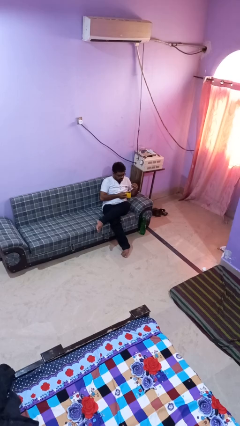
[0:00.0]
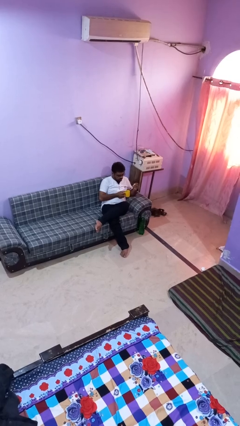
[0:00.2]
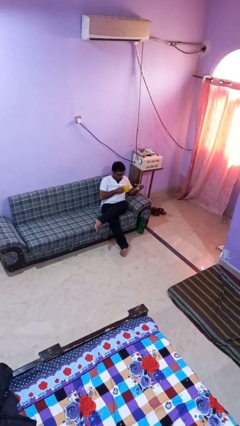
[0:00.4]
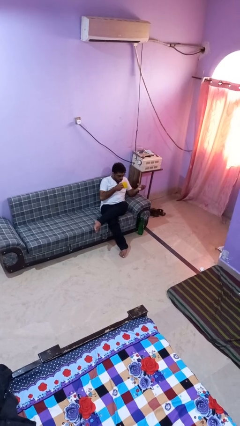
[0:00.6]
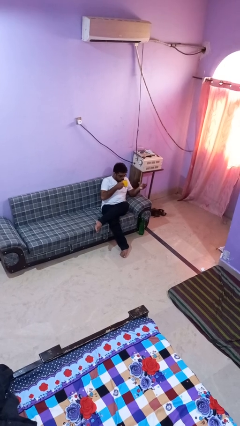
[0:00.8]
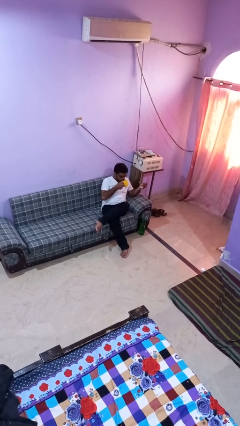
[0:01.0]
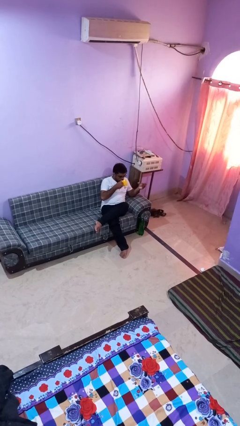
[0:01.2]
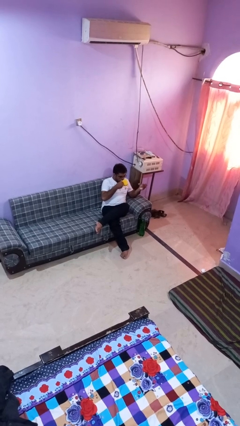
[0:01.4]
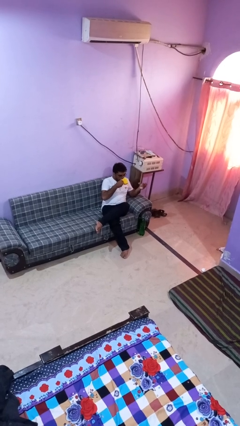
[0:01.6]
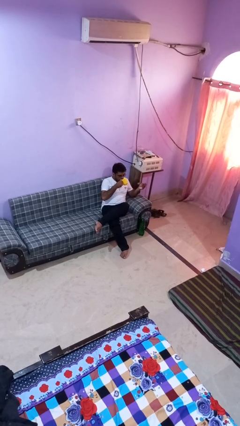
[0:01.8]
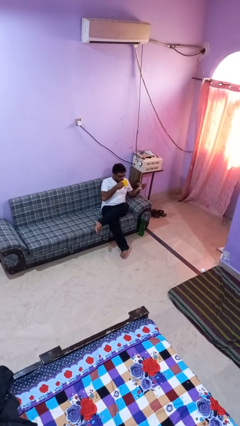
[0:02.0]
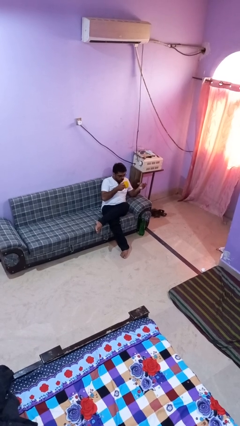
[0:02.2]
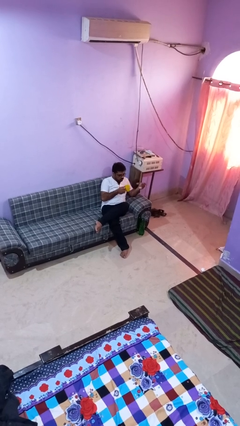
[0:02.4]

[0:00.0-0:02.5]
person drinks from mug

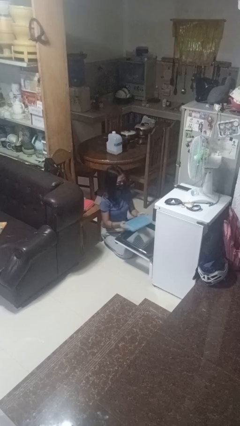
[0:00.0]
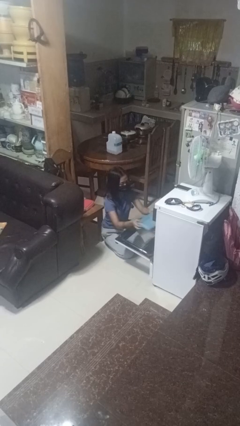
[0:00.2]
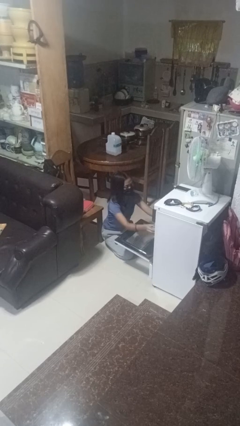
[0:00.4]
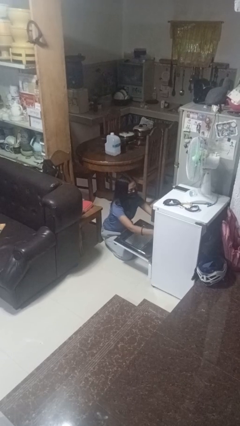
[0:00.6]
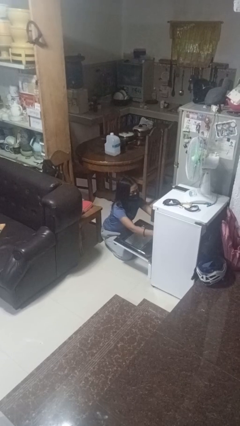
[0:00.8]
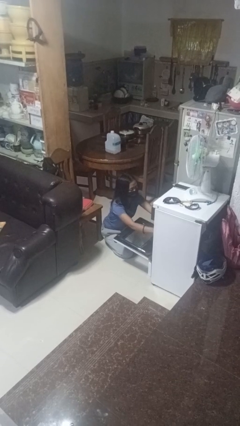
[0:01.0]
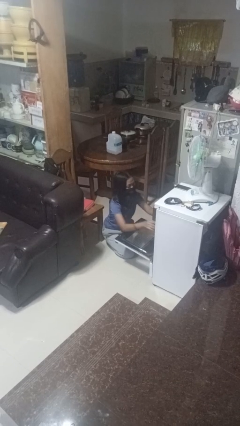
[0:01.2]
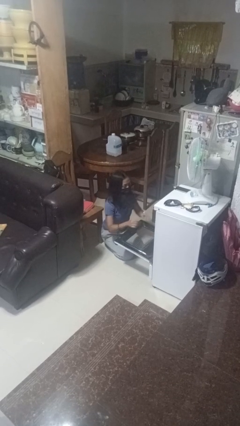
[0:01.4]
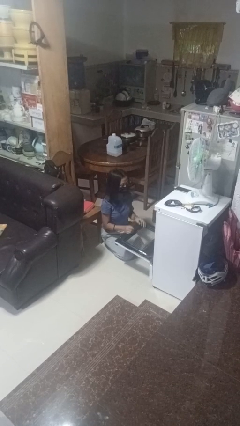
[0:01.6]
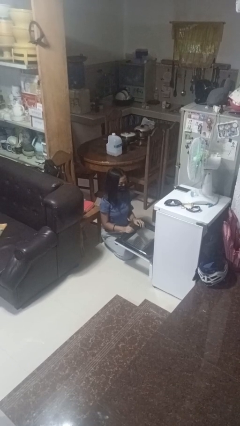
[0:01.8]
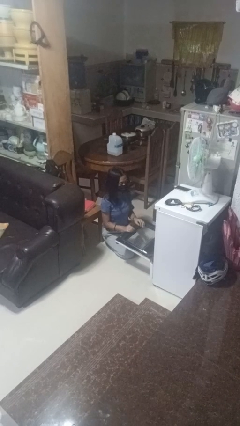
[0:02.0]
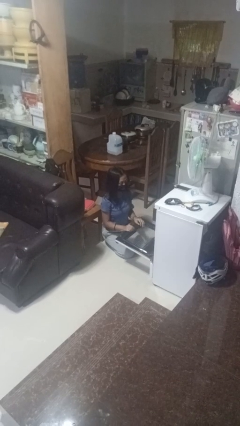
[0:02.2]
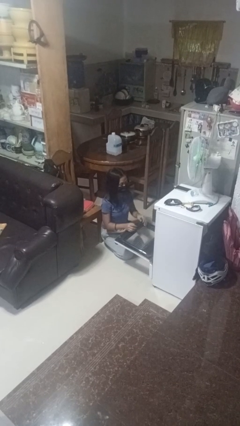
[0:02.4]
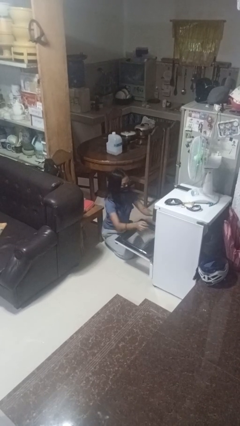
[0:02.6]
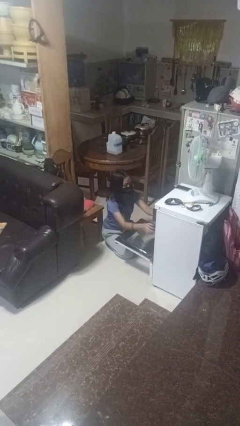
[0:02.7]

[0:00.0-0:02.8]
person puts object into oven

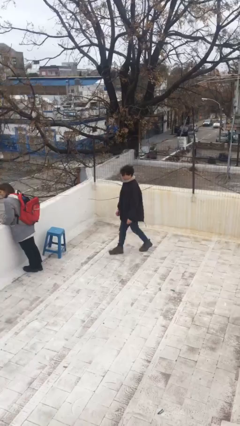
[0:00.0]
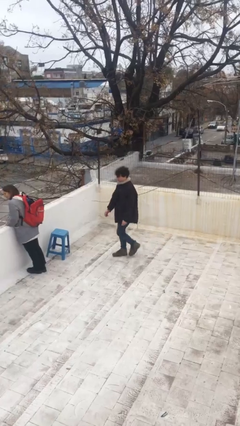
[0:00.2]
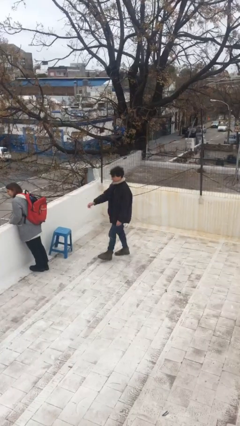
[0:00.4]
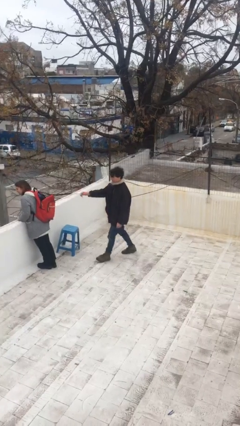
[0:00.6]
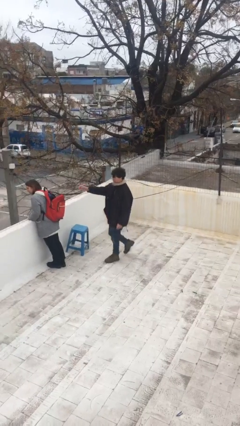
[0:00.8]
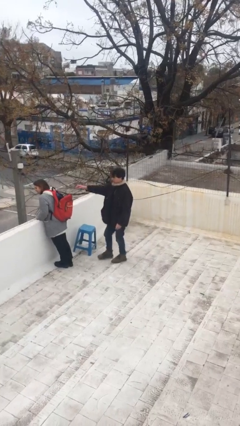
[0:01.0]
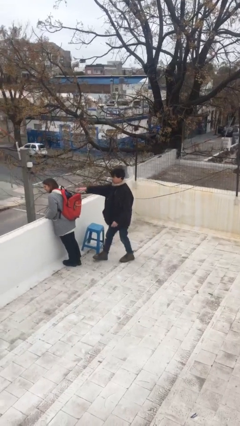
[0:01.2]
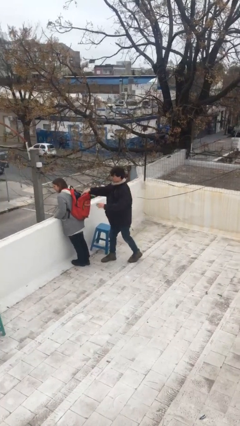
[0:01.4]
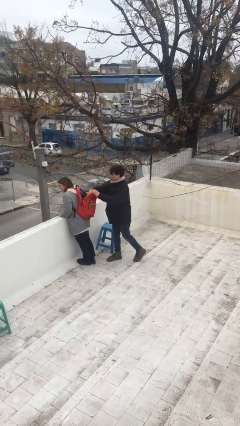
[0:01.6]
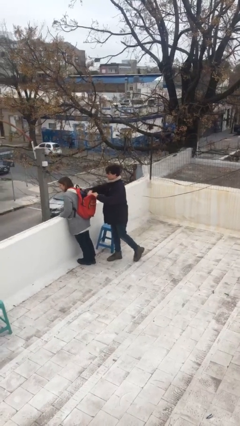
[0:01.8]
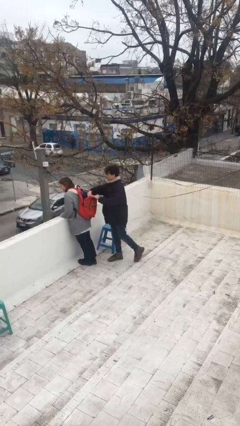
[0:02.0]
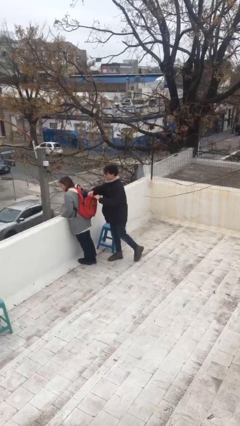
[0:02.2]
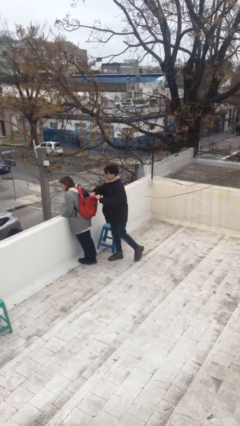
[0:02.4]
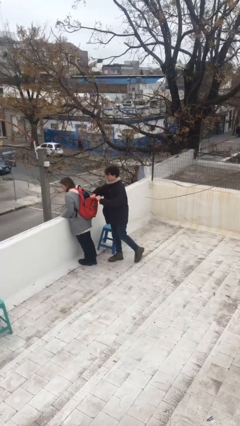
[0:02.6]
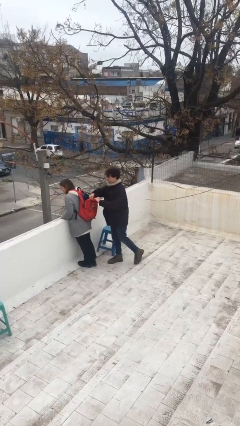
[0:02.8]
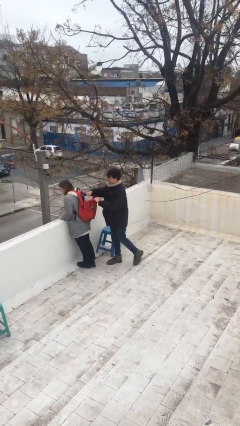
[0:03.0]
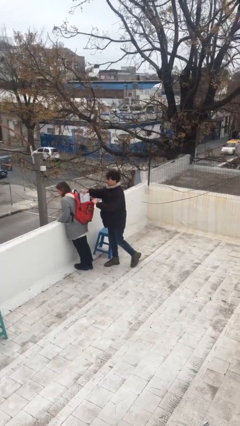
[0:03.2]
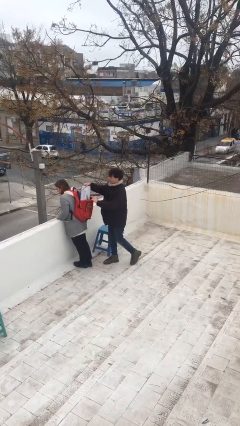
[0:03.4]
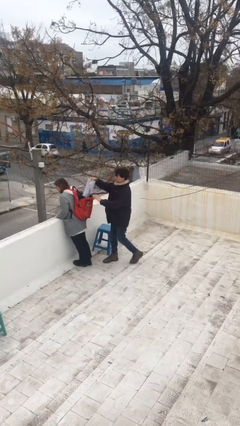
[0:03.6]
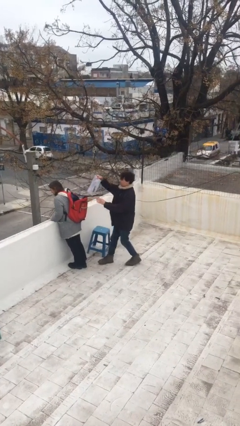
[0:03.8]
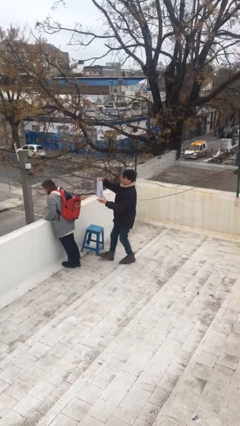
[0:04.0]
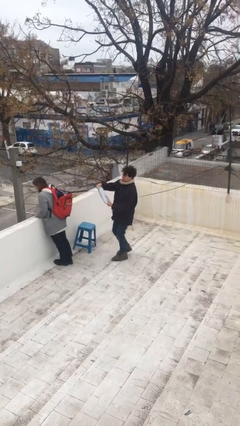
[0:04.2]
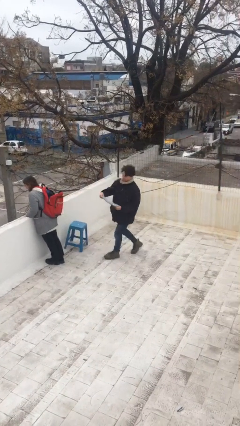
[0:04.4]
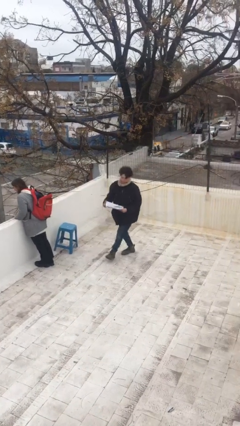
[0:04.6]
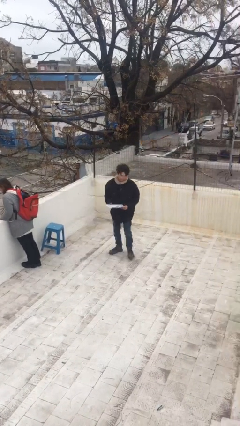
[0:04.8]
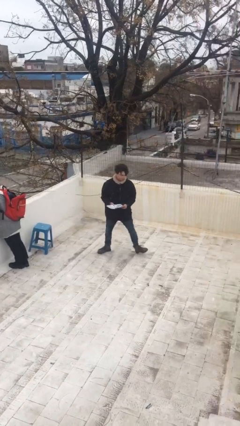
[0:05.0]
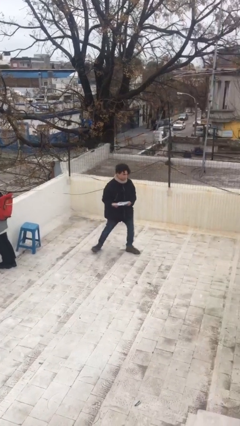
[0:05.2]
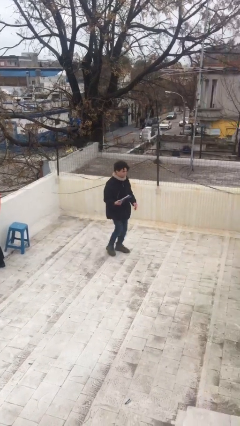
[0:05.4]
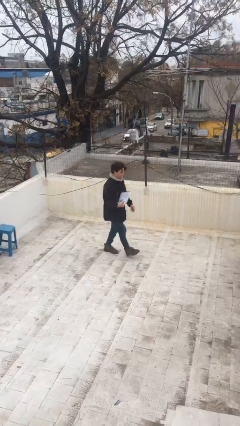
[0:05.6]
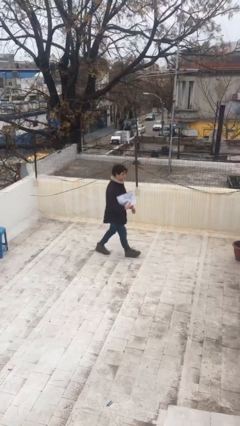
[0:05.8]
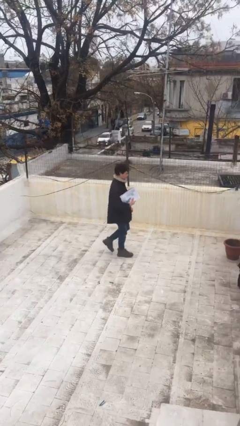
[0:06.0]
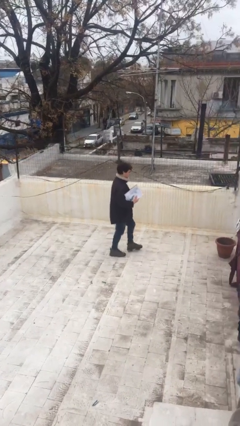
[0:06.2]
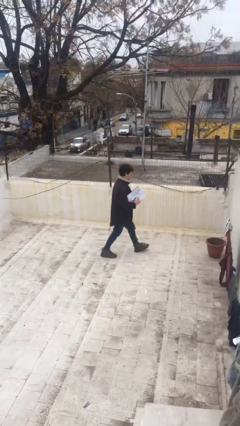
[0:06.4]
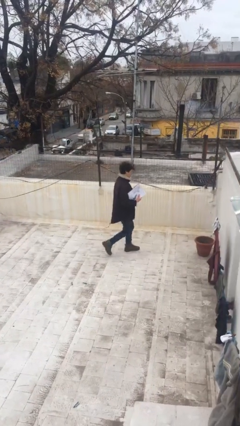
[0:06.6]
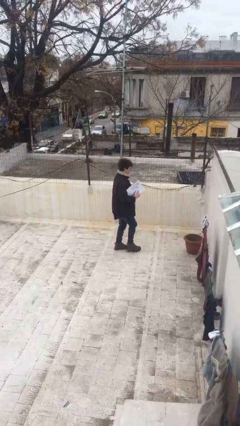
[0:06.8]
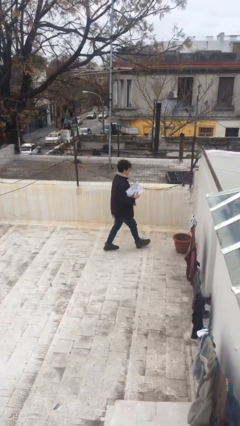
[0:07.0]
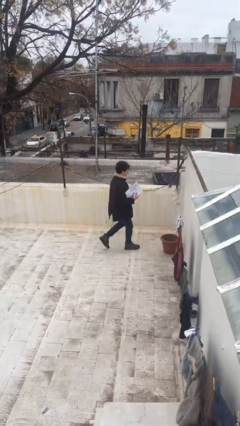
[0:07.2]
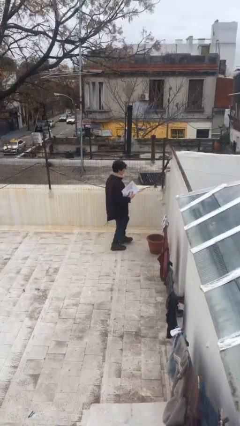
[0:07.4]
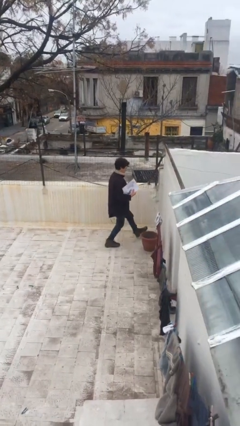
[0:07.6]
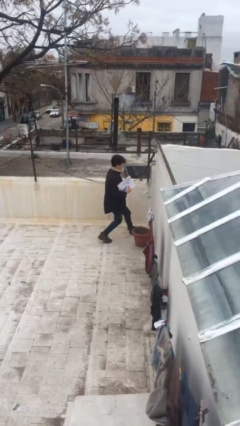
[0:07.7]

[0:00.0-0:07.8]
person steals object from person

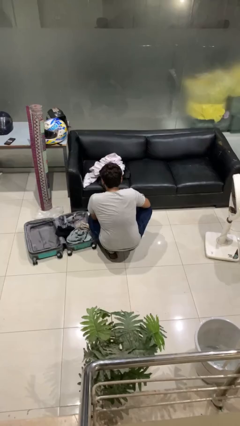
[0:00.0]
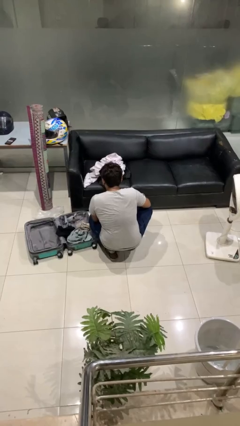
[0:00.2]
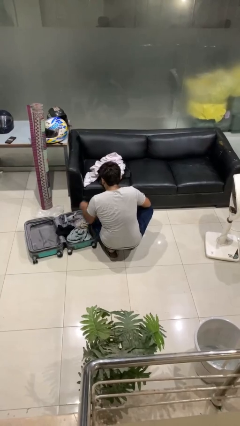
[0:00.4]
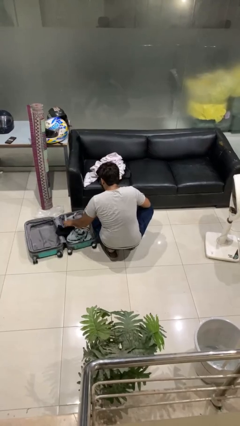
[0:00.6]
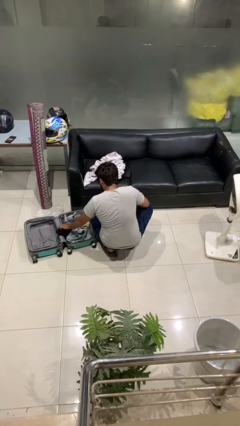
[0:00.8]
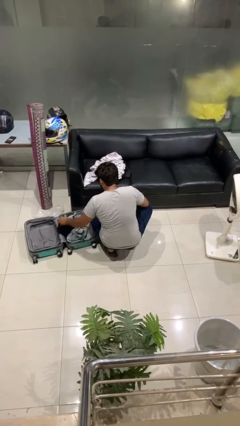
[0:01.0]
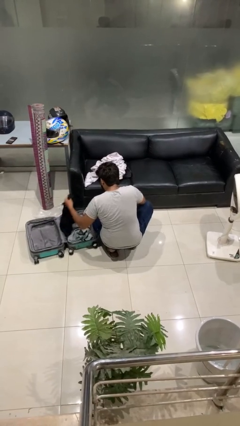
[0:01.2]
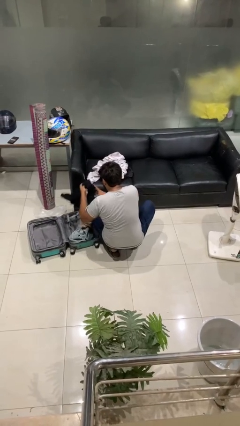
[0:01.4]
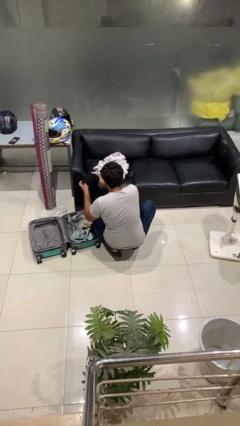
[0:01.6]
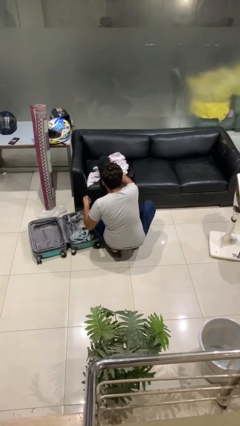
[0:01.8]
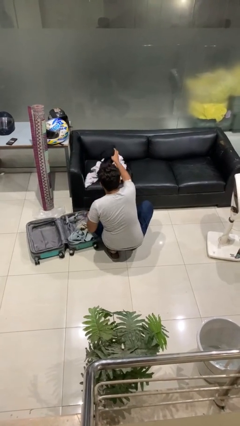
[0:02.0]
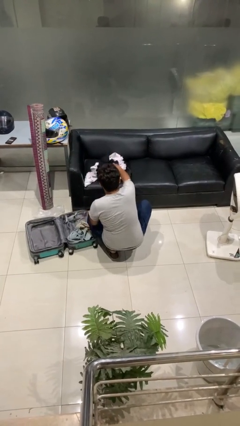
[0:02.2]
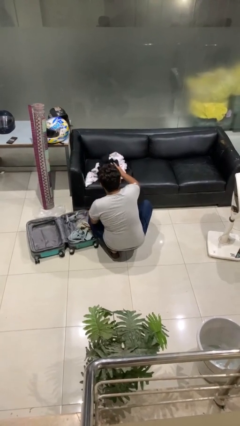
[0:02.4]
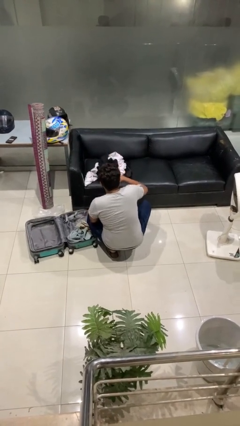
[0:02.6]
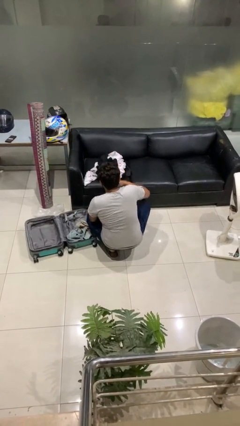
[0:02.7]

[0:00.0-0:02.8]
person unloads clothes from suitcase

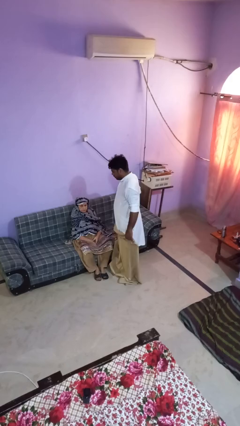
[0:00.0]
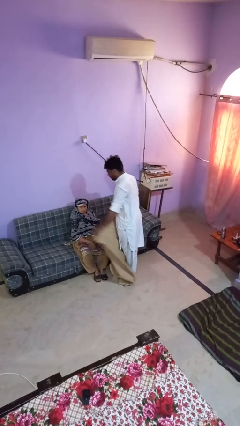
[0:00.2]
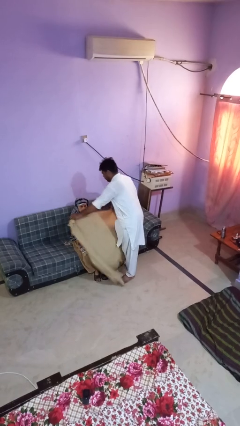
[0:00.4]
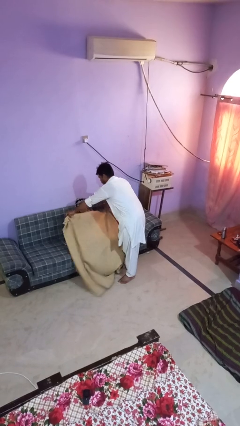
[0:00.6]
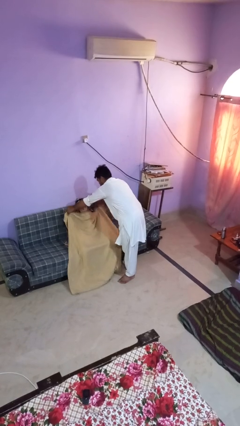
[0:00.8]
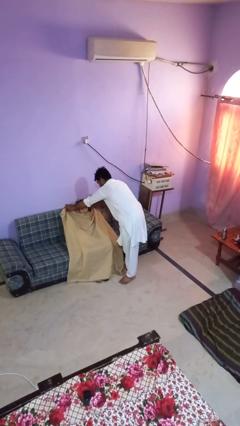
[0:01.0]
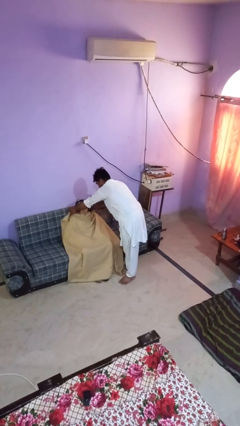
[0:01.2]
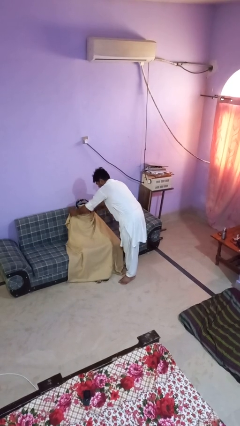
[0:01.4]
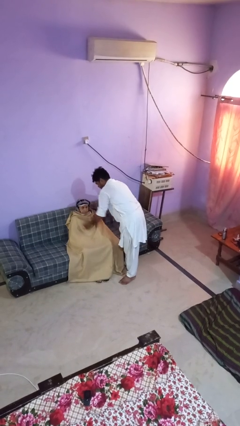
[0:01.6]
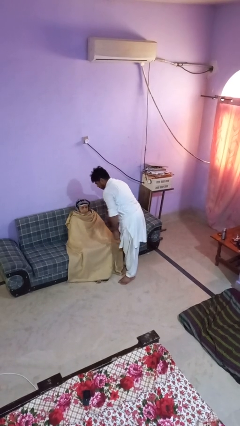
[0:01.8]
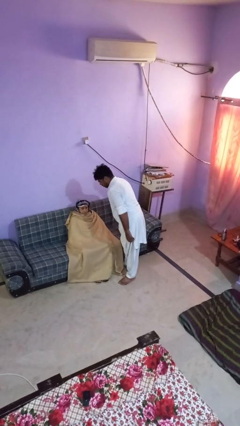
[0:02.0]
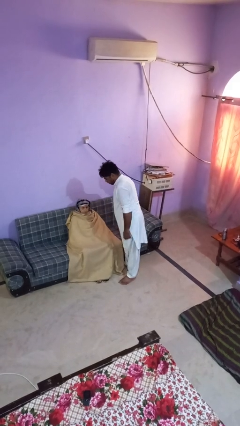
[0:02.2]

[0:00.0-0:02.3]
person covers friend with blanket
